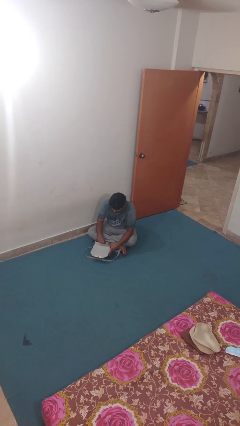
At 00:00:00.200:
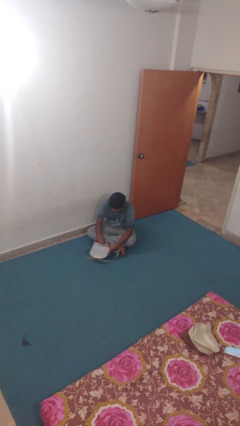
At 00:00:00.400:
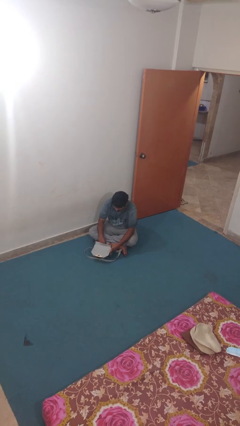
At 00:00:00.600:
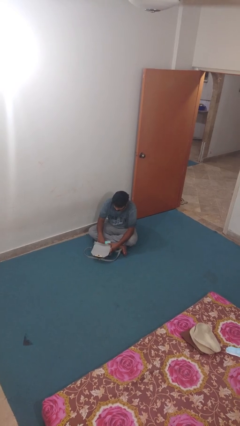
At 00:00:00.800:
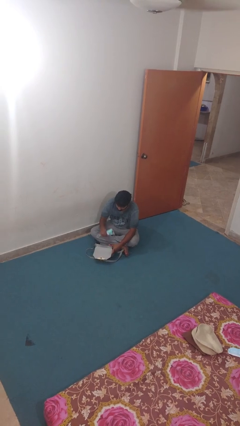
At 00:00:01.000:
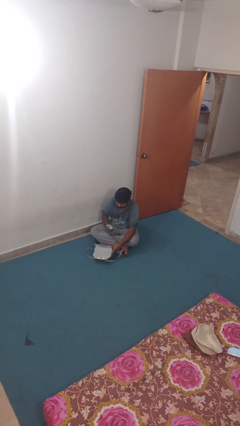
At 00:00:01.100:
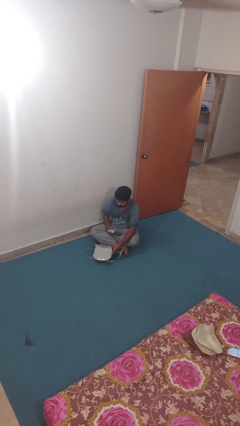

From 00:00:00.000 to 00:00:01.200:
person takes object from purse

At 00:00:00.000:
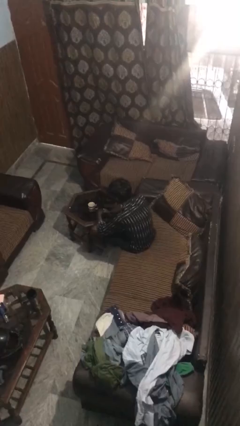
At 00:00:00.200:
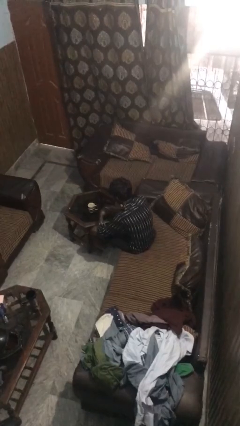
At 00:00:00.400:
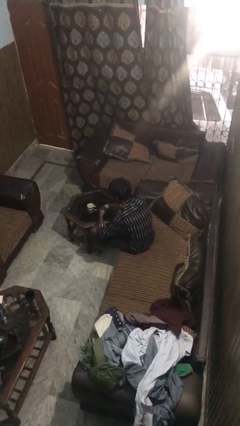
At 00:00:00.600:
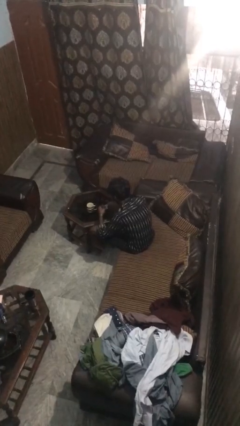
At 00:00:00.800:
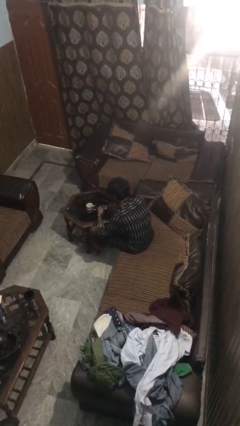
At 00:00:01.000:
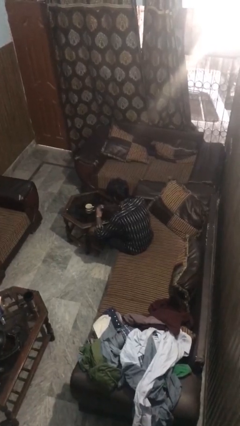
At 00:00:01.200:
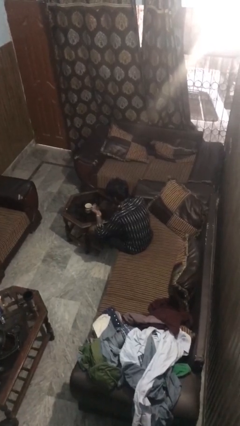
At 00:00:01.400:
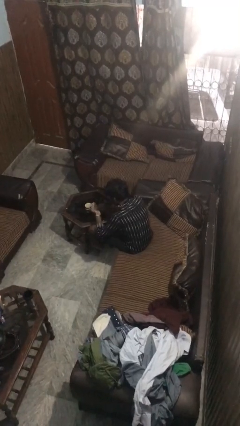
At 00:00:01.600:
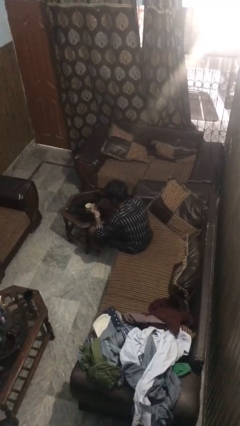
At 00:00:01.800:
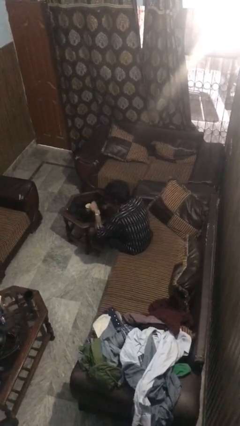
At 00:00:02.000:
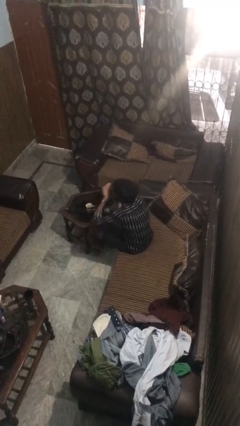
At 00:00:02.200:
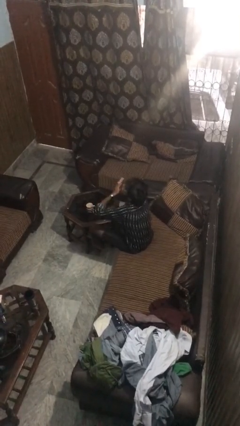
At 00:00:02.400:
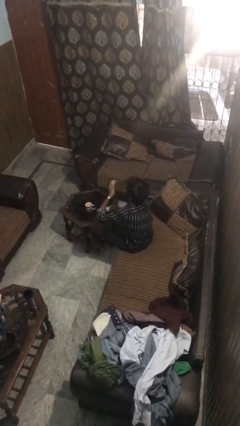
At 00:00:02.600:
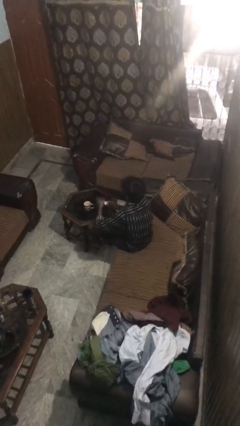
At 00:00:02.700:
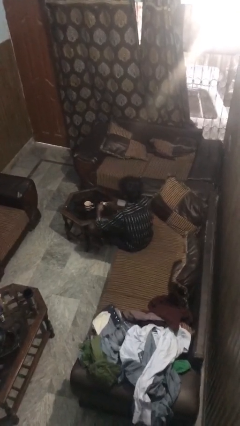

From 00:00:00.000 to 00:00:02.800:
person takes medicine pills

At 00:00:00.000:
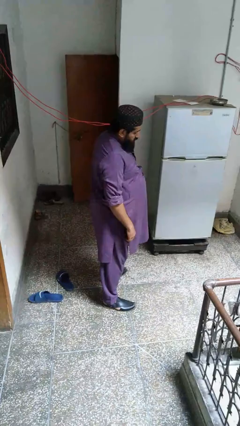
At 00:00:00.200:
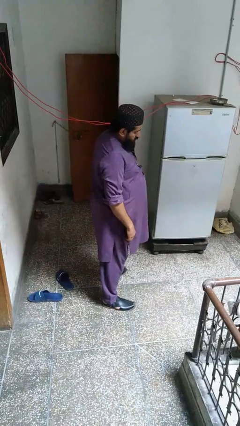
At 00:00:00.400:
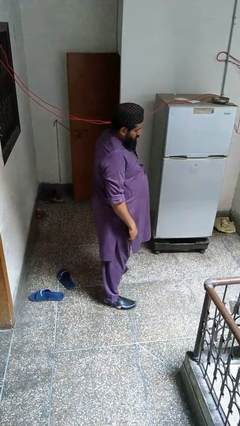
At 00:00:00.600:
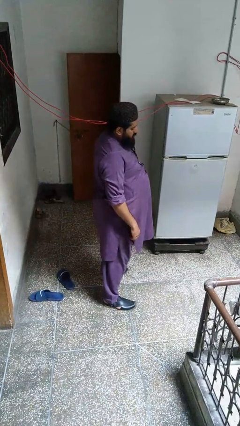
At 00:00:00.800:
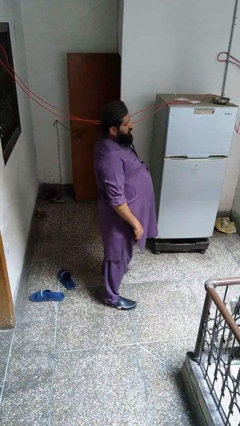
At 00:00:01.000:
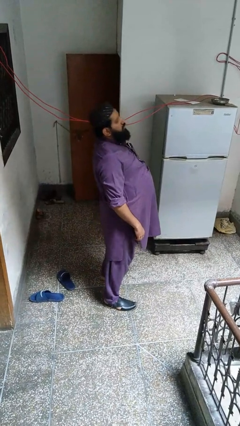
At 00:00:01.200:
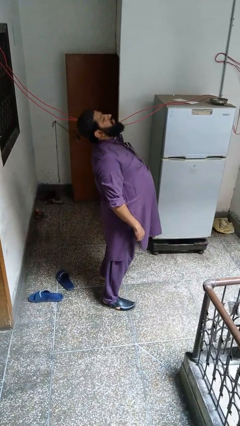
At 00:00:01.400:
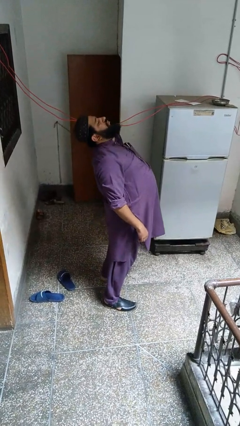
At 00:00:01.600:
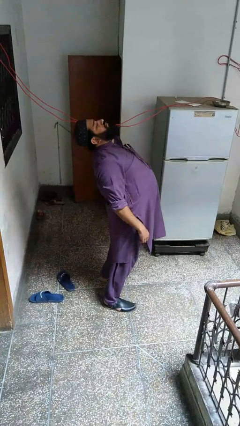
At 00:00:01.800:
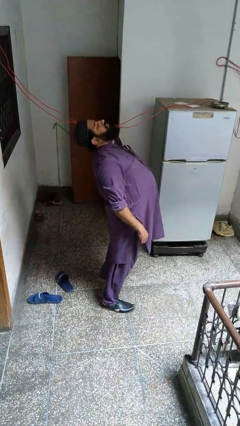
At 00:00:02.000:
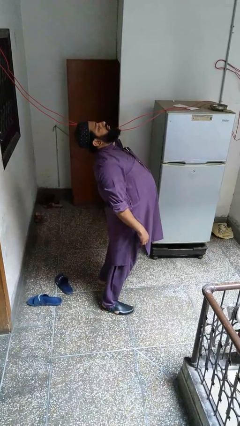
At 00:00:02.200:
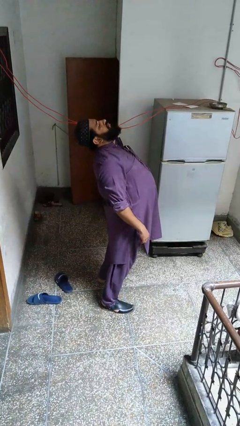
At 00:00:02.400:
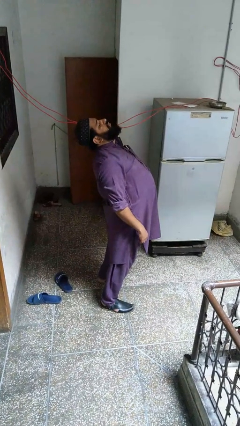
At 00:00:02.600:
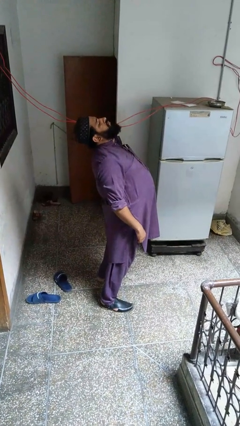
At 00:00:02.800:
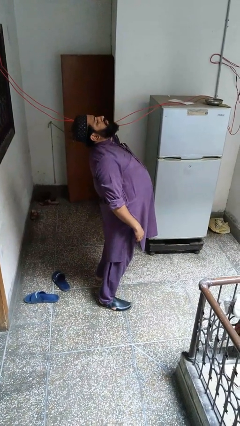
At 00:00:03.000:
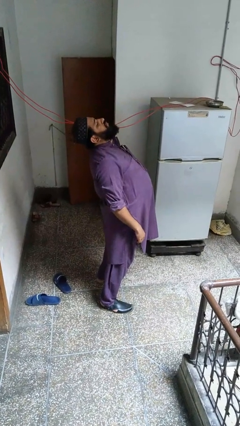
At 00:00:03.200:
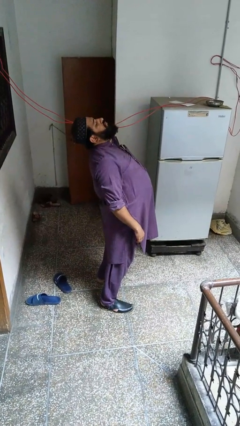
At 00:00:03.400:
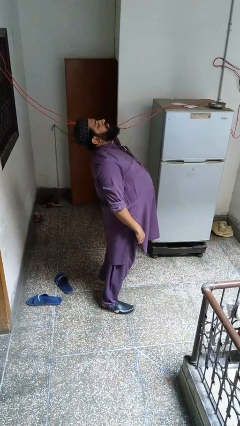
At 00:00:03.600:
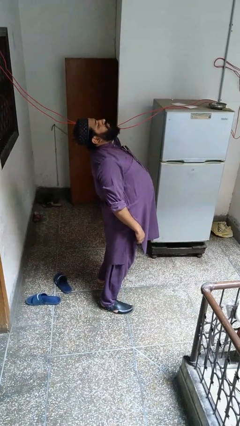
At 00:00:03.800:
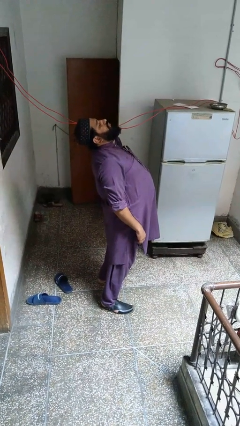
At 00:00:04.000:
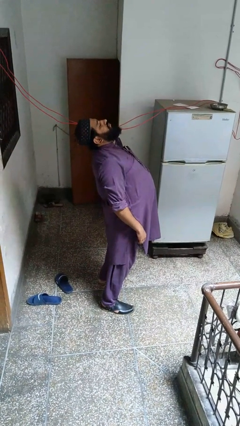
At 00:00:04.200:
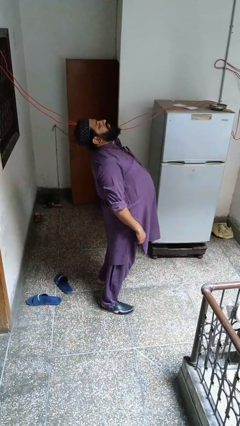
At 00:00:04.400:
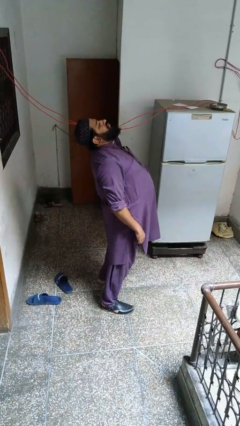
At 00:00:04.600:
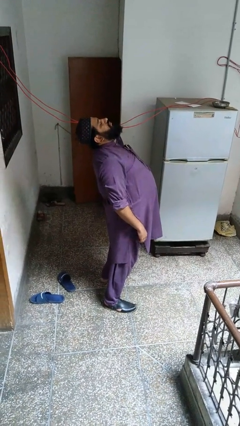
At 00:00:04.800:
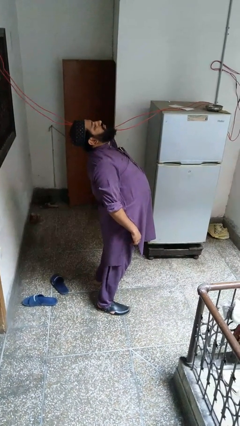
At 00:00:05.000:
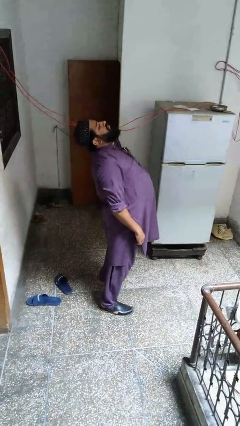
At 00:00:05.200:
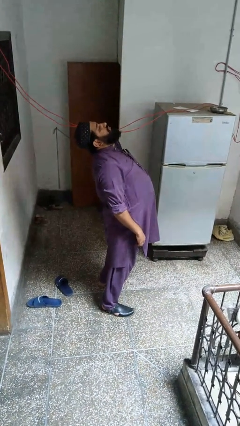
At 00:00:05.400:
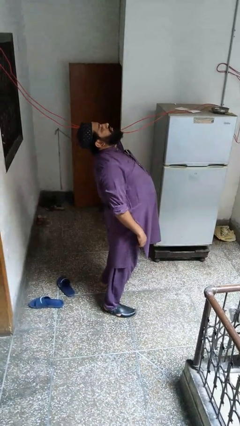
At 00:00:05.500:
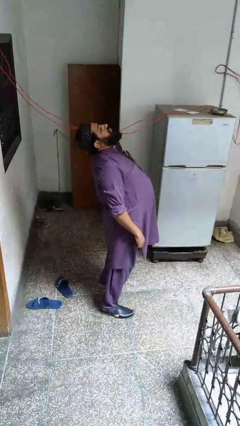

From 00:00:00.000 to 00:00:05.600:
person stretches back

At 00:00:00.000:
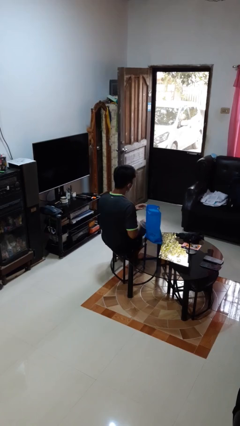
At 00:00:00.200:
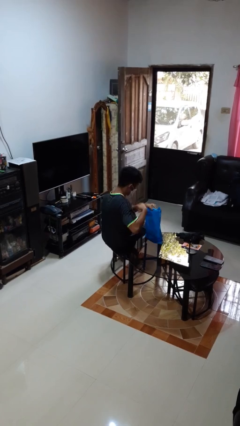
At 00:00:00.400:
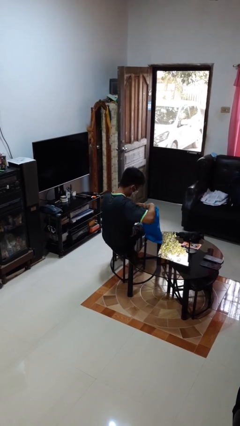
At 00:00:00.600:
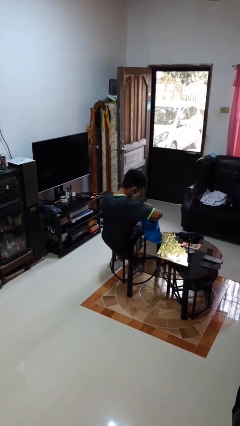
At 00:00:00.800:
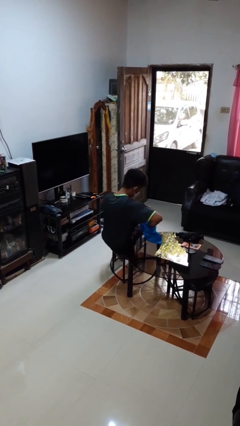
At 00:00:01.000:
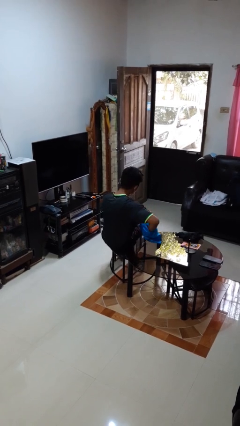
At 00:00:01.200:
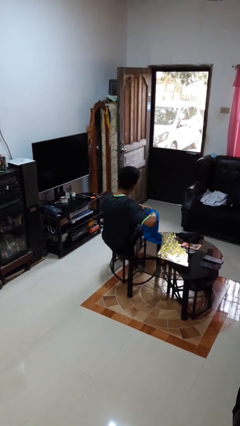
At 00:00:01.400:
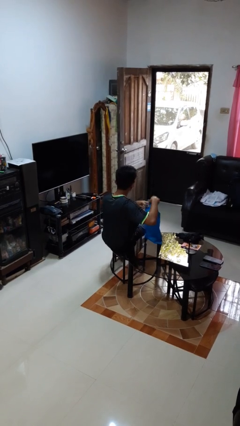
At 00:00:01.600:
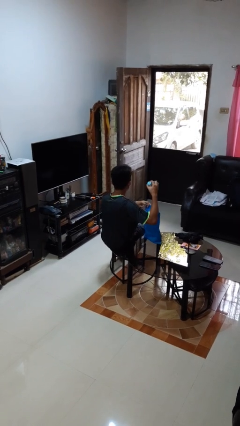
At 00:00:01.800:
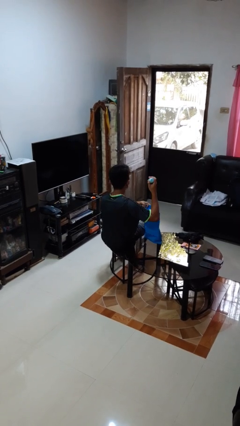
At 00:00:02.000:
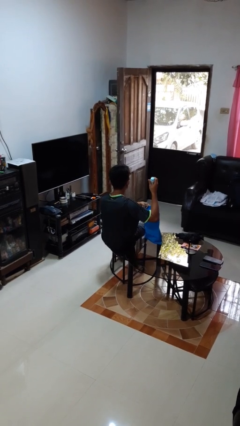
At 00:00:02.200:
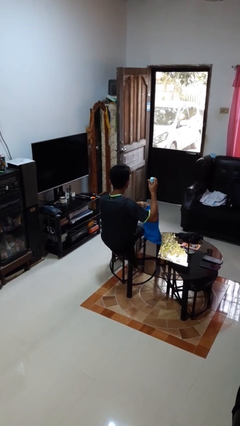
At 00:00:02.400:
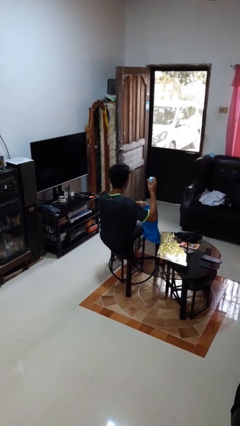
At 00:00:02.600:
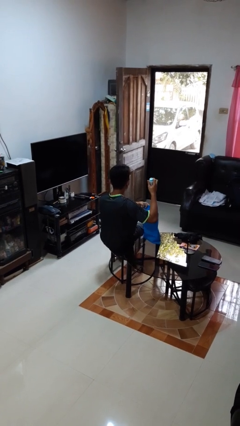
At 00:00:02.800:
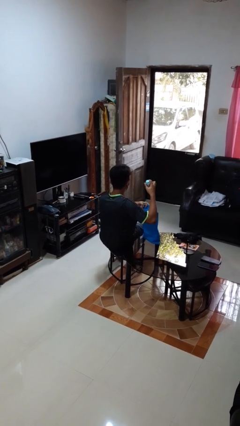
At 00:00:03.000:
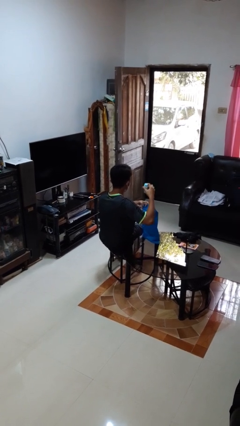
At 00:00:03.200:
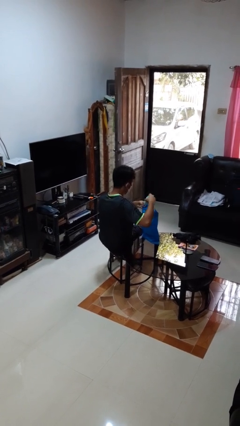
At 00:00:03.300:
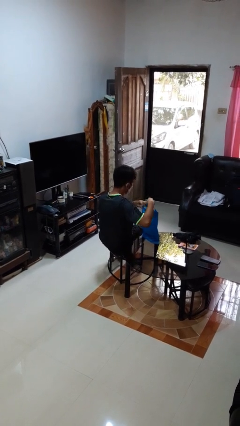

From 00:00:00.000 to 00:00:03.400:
person takes object from bag

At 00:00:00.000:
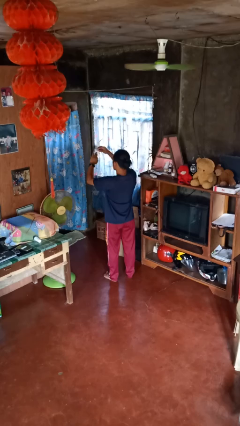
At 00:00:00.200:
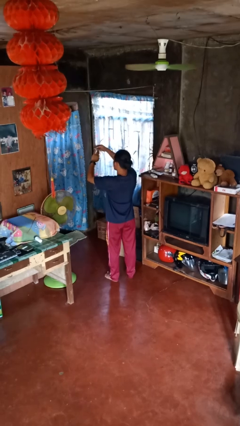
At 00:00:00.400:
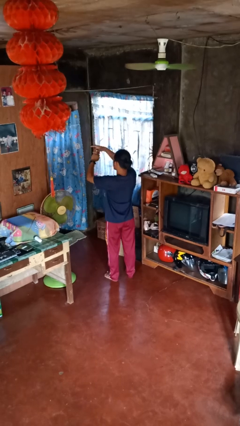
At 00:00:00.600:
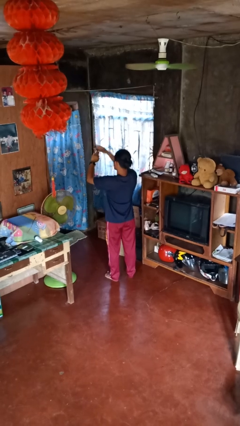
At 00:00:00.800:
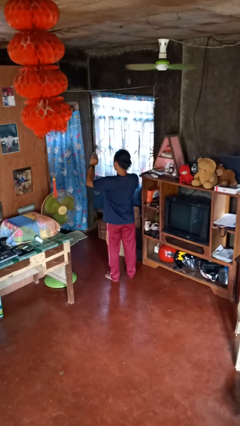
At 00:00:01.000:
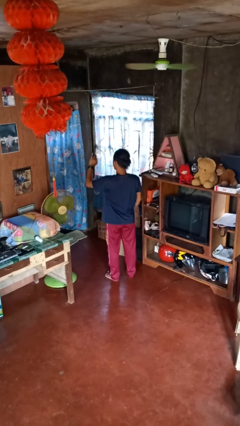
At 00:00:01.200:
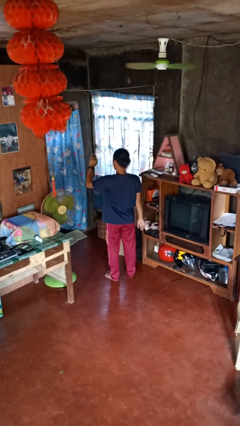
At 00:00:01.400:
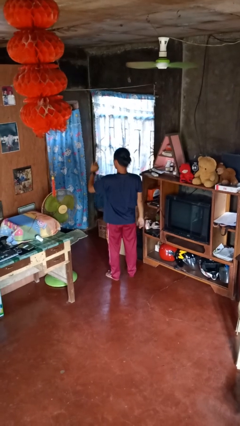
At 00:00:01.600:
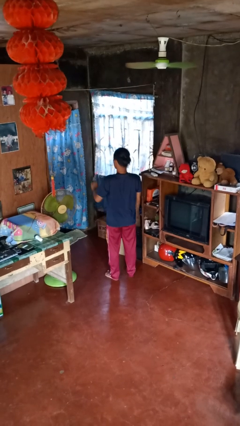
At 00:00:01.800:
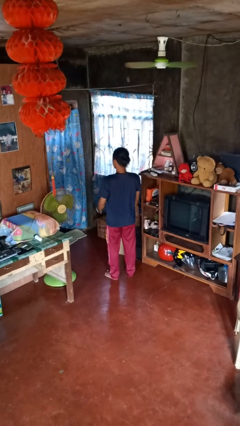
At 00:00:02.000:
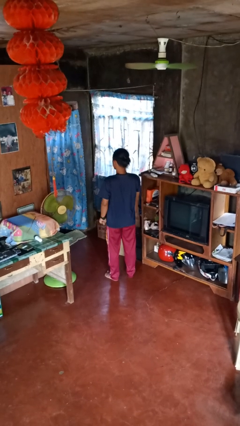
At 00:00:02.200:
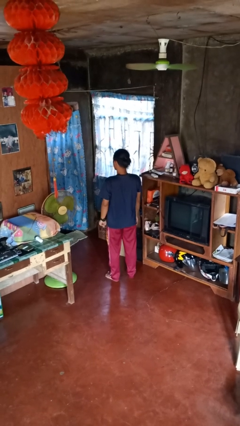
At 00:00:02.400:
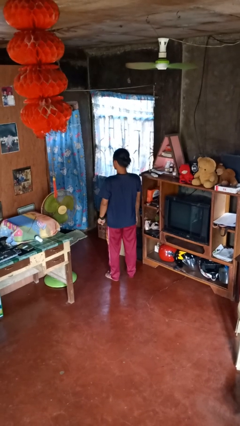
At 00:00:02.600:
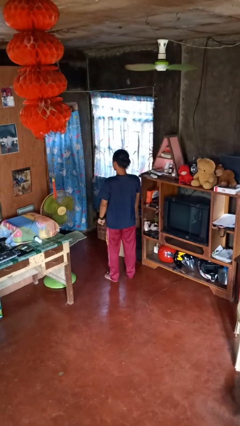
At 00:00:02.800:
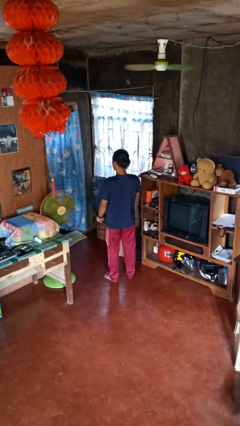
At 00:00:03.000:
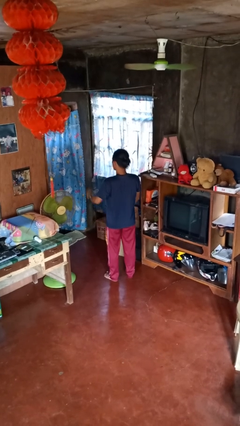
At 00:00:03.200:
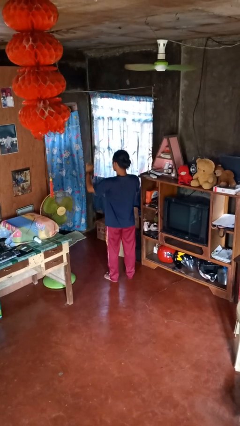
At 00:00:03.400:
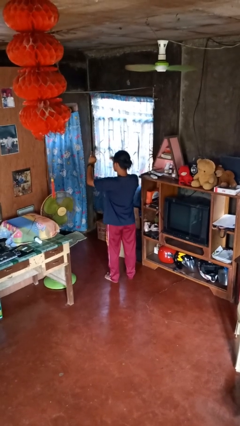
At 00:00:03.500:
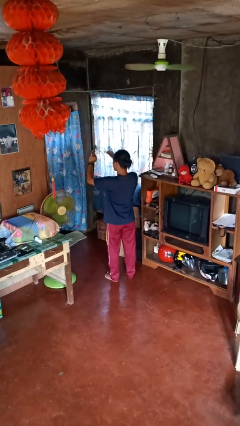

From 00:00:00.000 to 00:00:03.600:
person puts on ring

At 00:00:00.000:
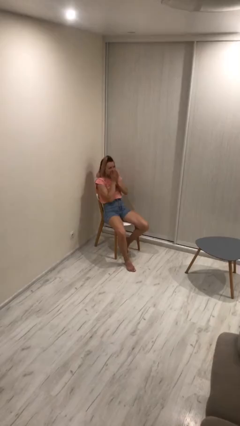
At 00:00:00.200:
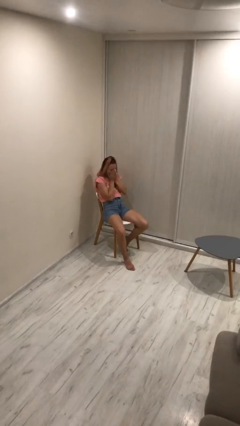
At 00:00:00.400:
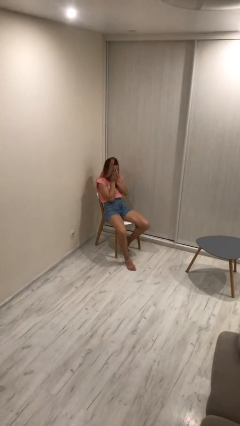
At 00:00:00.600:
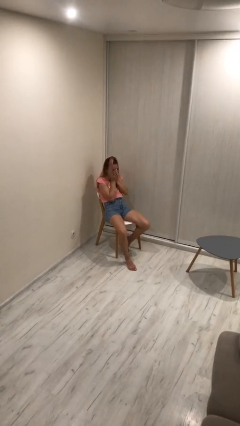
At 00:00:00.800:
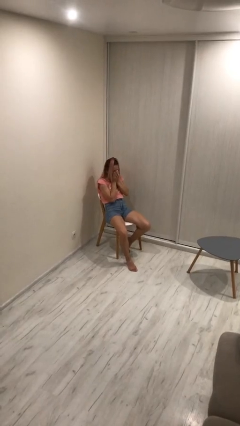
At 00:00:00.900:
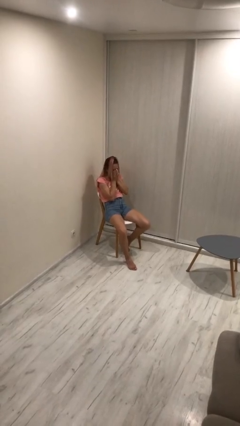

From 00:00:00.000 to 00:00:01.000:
person sneezes into hand
